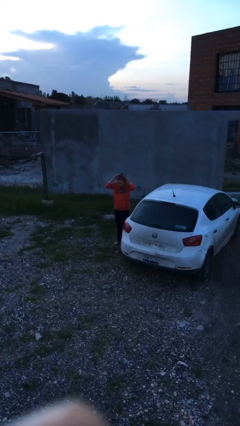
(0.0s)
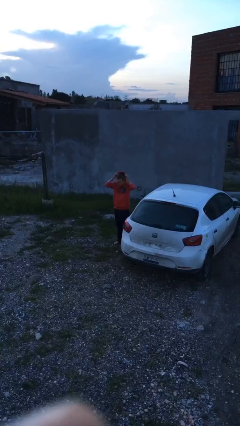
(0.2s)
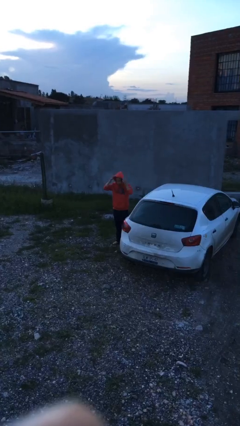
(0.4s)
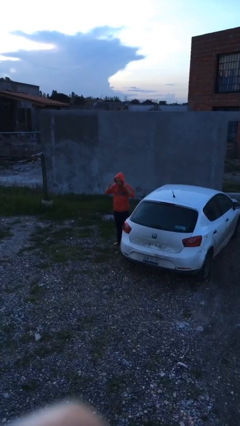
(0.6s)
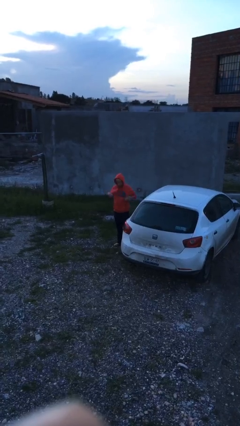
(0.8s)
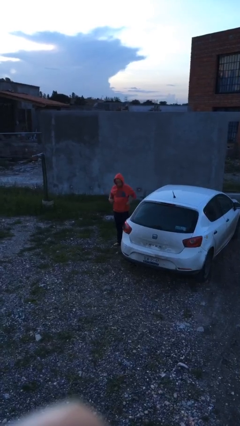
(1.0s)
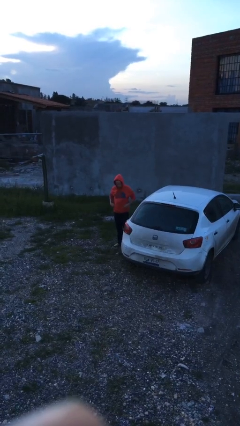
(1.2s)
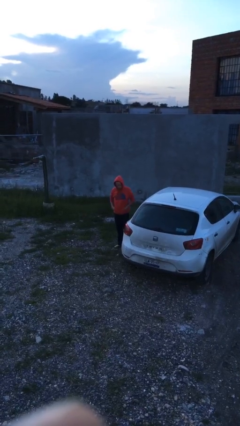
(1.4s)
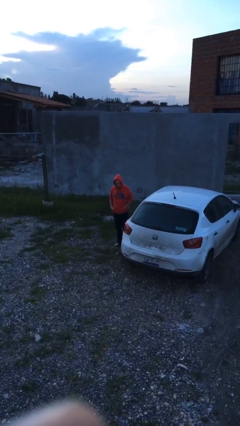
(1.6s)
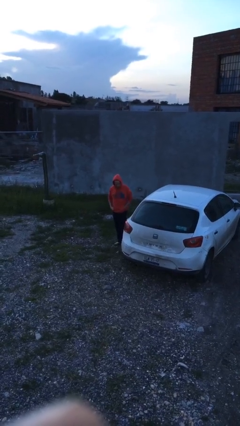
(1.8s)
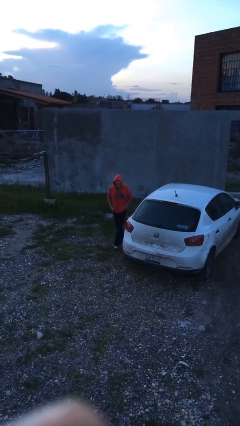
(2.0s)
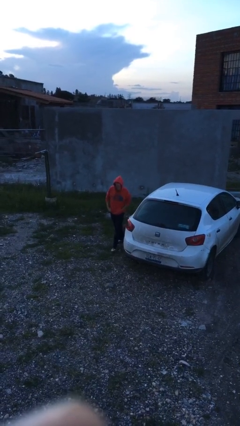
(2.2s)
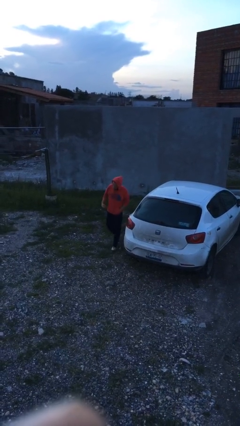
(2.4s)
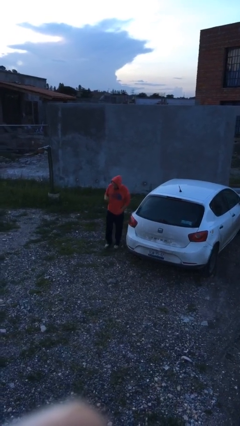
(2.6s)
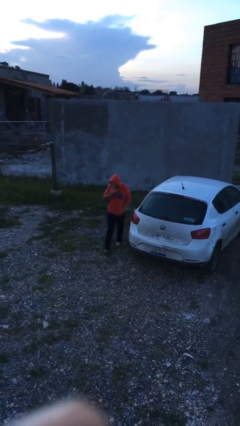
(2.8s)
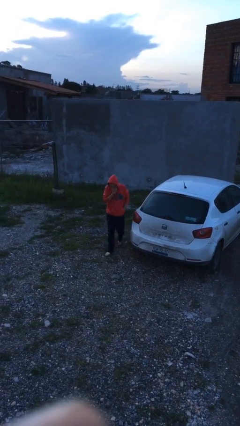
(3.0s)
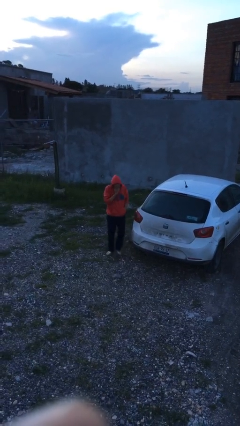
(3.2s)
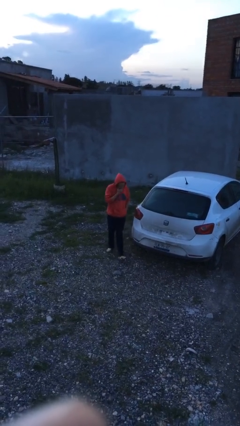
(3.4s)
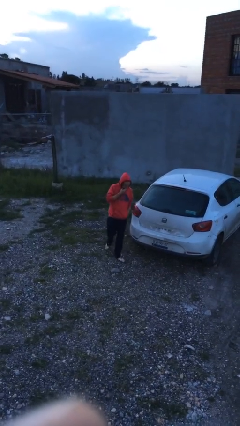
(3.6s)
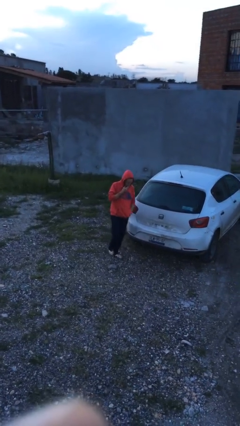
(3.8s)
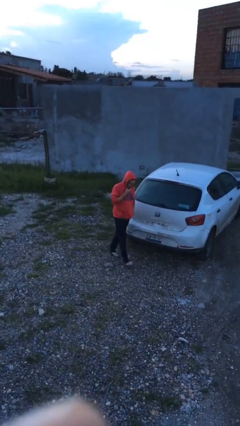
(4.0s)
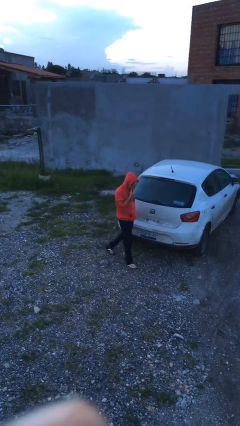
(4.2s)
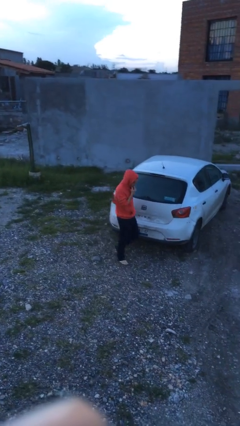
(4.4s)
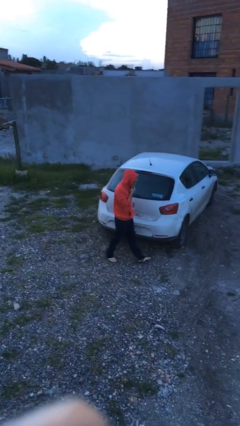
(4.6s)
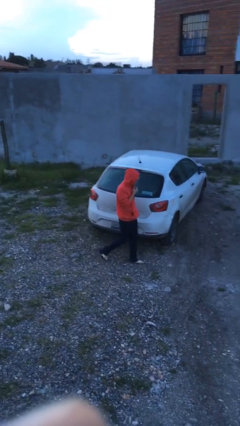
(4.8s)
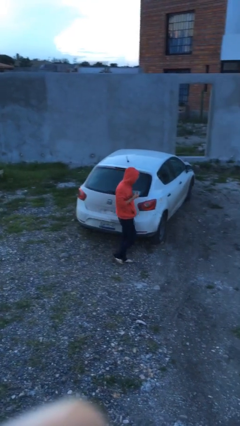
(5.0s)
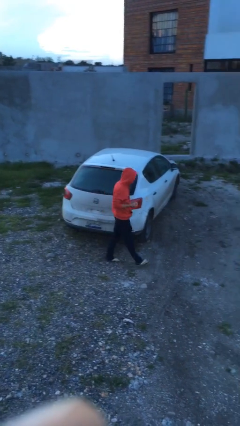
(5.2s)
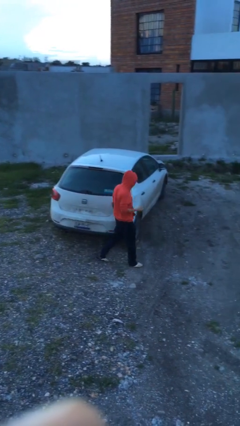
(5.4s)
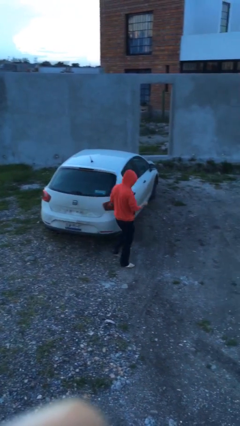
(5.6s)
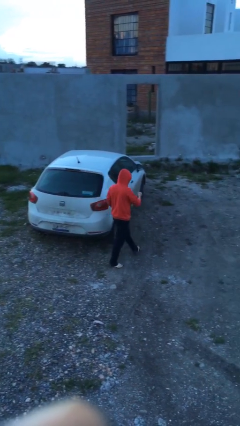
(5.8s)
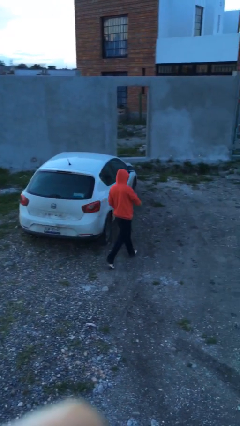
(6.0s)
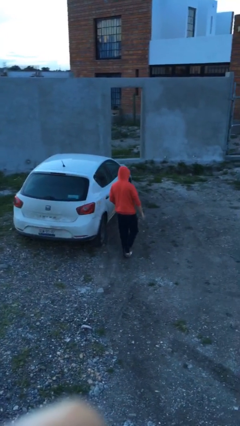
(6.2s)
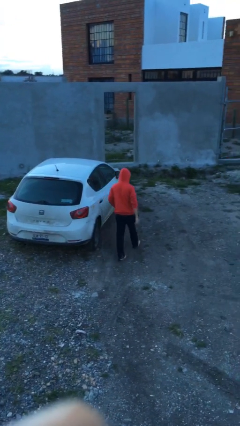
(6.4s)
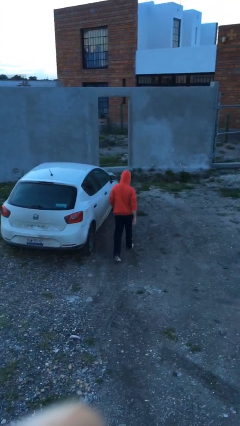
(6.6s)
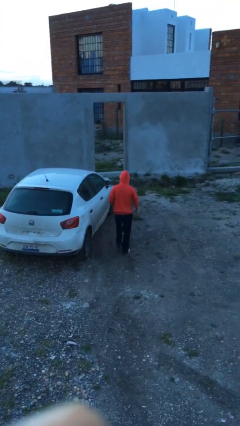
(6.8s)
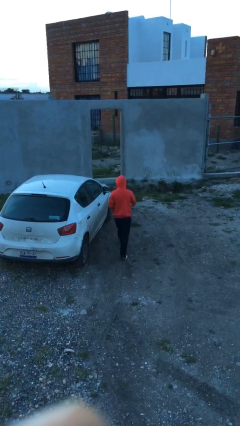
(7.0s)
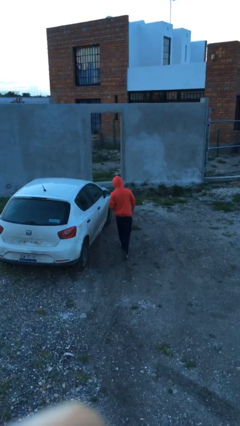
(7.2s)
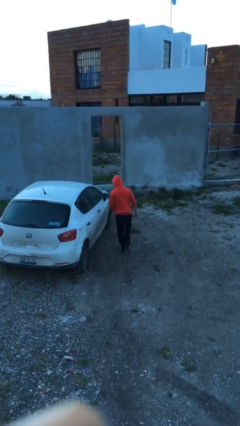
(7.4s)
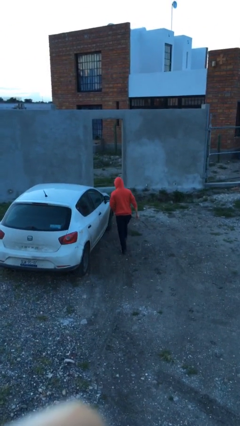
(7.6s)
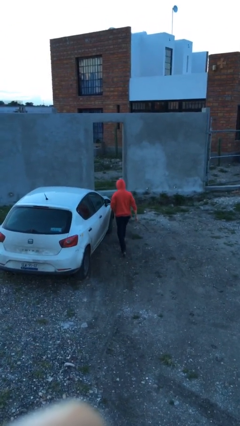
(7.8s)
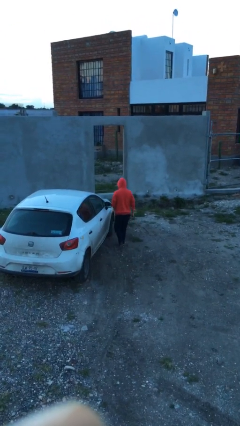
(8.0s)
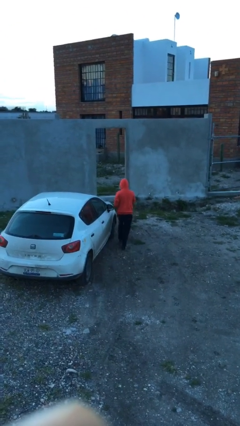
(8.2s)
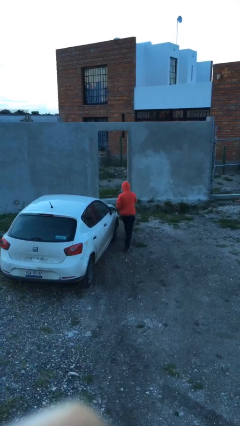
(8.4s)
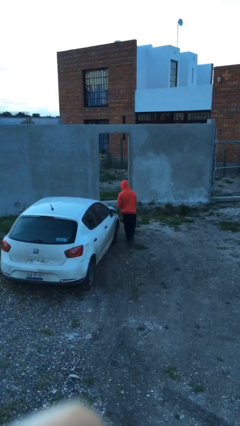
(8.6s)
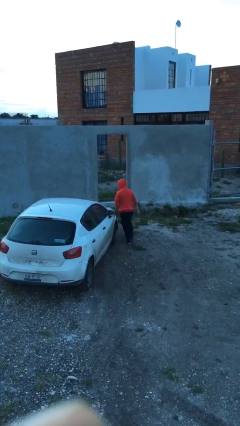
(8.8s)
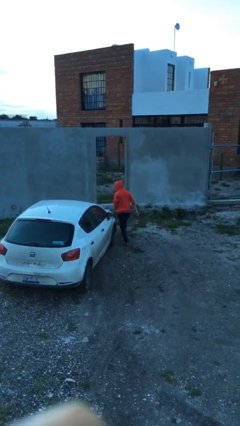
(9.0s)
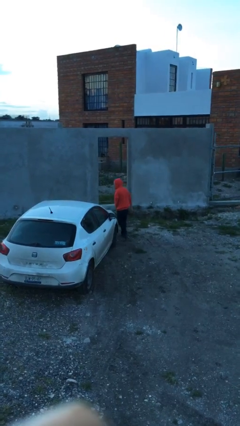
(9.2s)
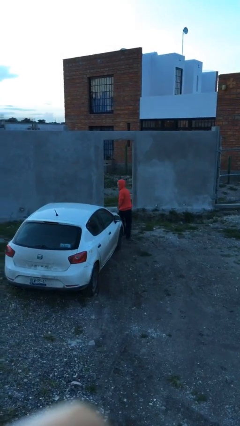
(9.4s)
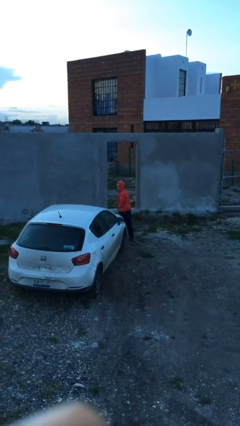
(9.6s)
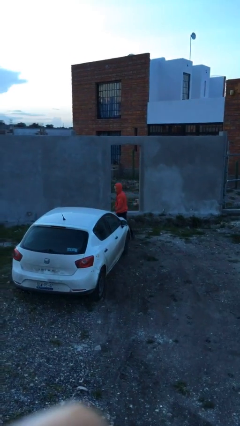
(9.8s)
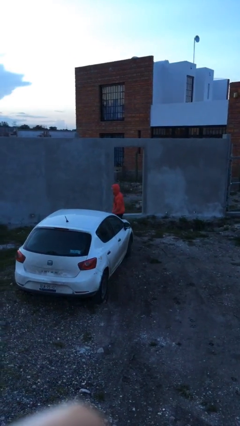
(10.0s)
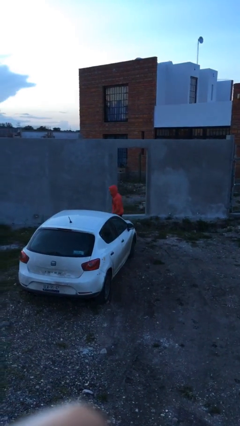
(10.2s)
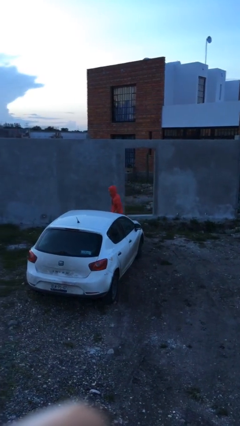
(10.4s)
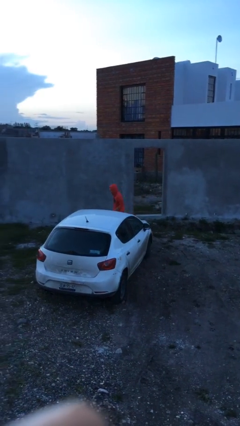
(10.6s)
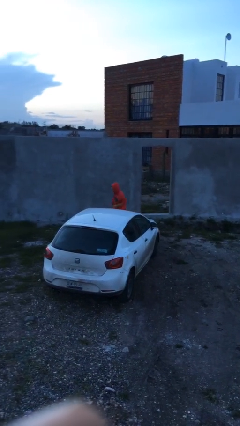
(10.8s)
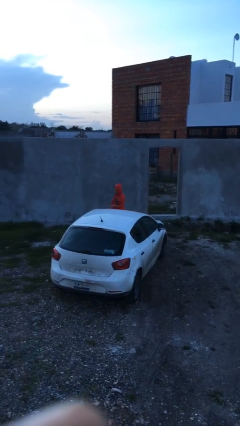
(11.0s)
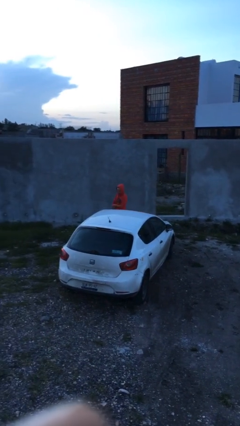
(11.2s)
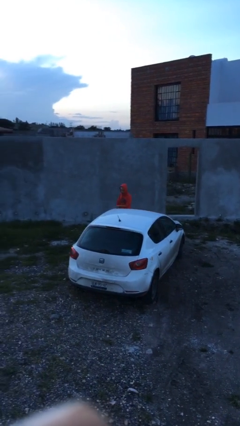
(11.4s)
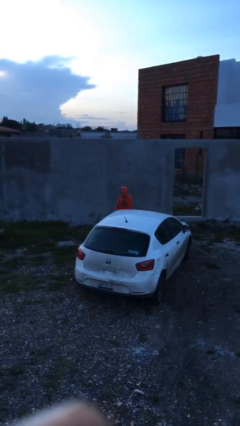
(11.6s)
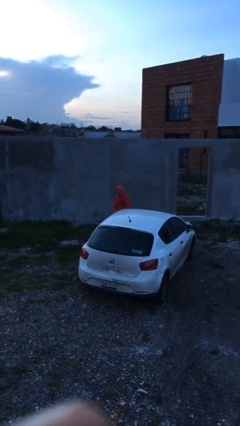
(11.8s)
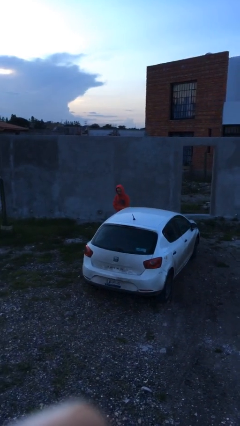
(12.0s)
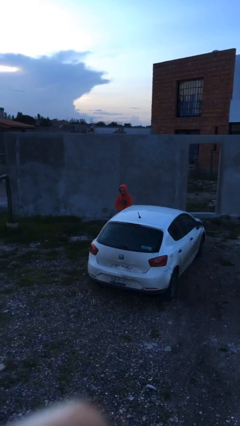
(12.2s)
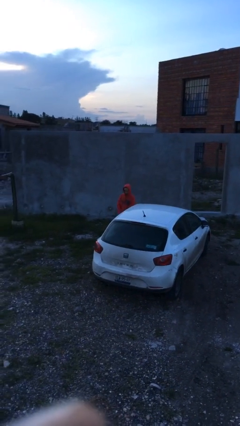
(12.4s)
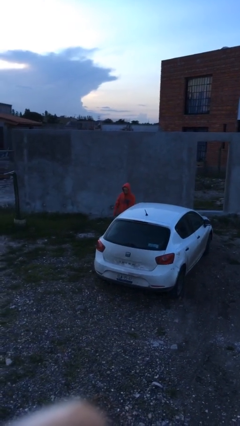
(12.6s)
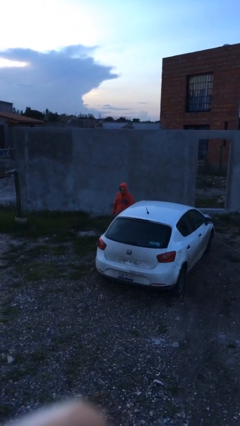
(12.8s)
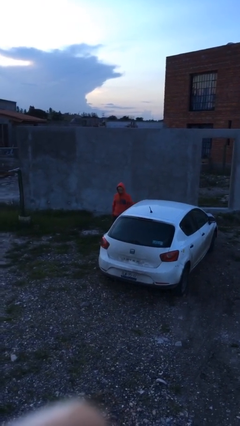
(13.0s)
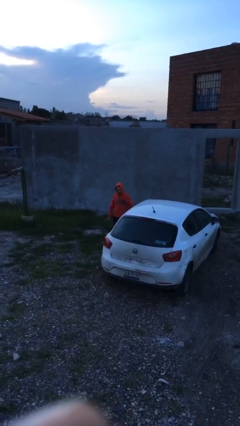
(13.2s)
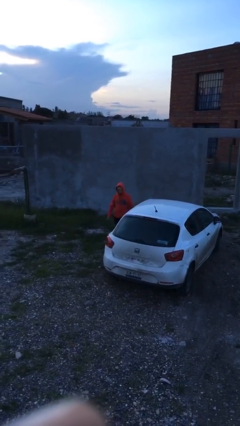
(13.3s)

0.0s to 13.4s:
person walks around car

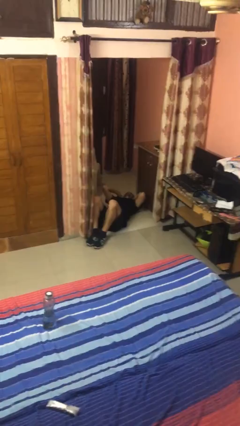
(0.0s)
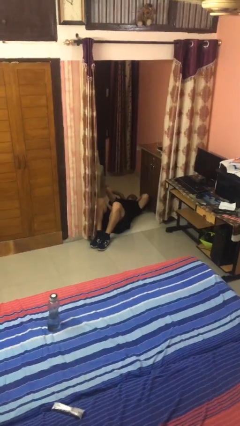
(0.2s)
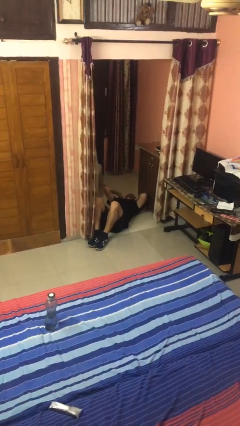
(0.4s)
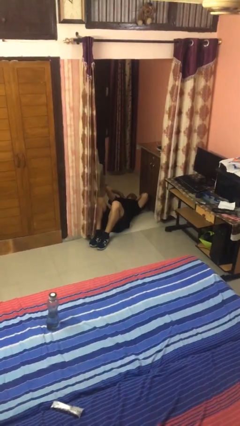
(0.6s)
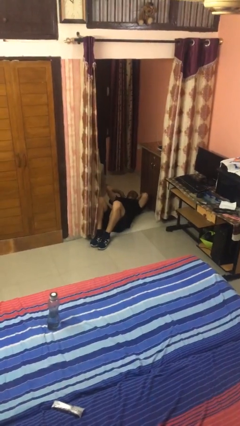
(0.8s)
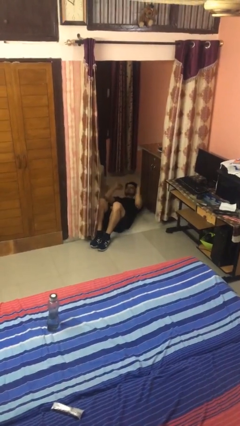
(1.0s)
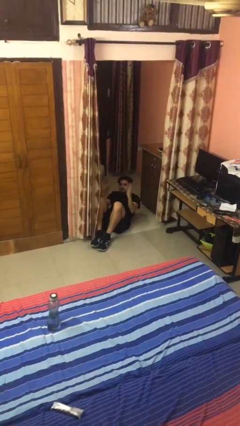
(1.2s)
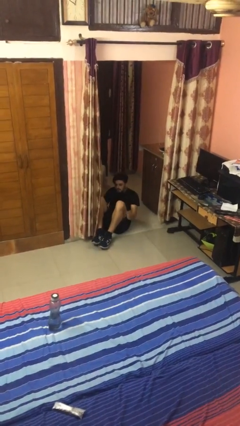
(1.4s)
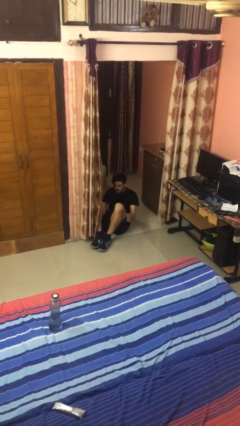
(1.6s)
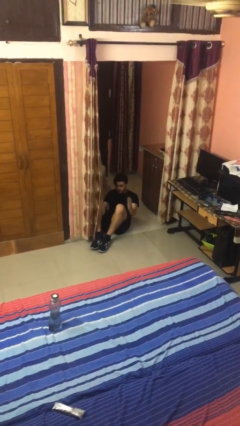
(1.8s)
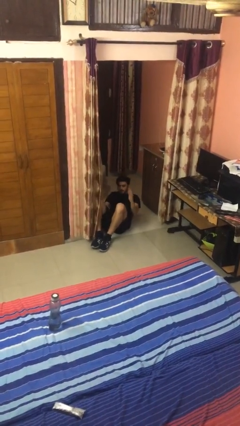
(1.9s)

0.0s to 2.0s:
person exercises with situp

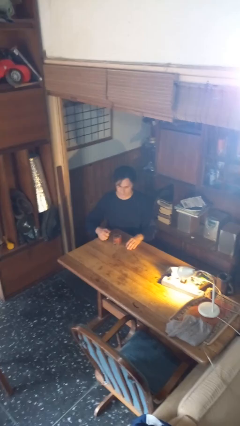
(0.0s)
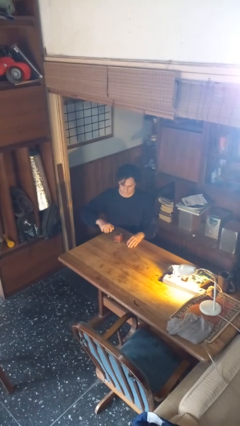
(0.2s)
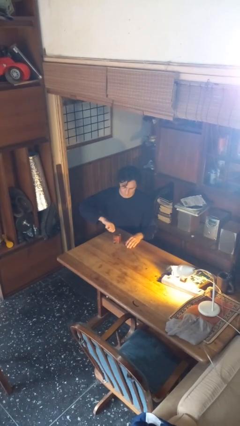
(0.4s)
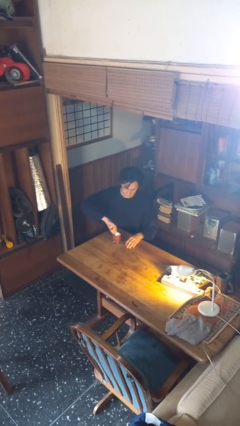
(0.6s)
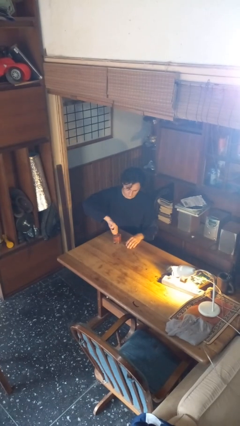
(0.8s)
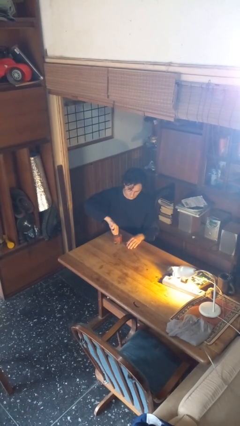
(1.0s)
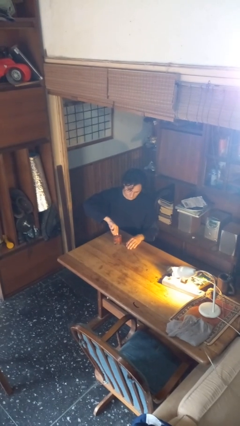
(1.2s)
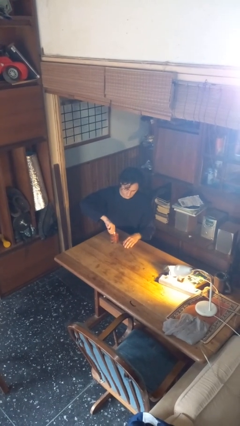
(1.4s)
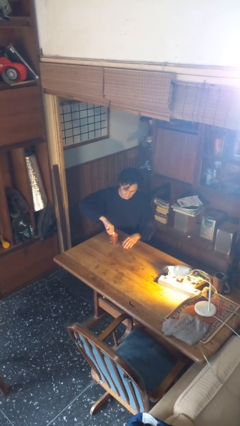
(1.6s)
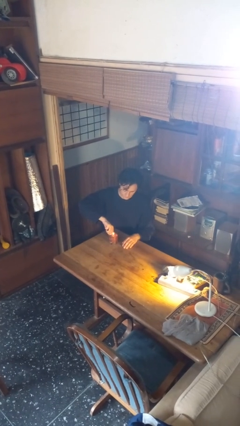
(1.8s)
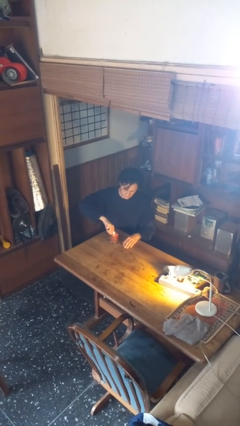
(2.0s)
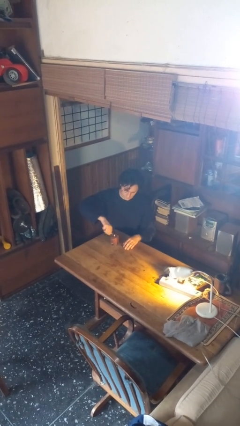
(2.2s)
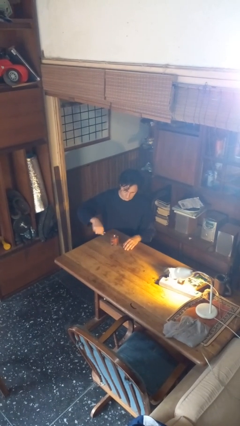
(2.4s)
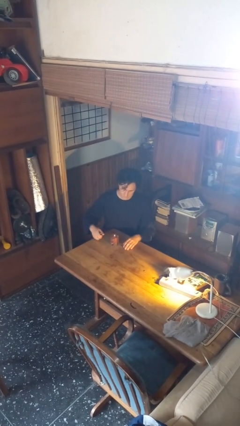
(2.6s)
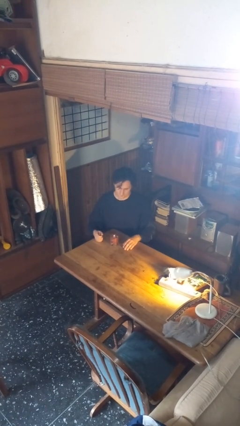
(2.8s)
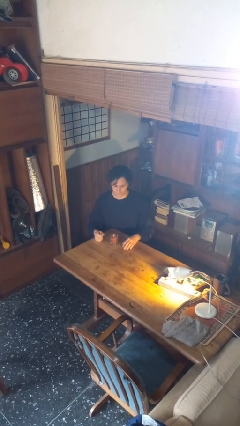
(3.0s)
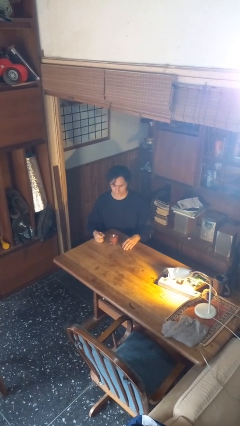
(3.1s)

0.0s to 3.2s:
person lights candle
